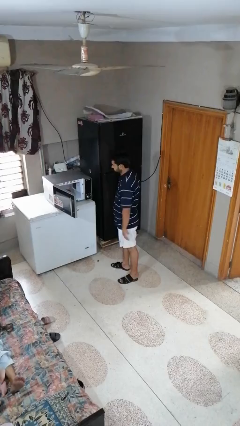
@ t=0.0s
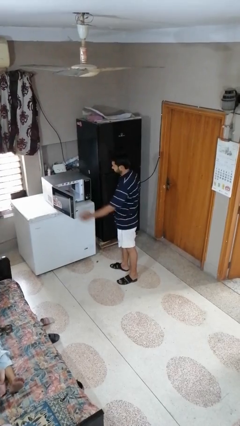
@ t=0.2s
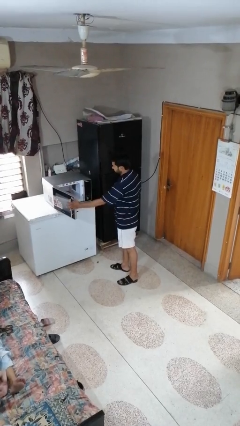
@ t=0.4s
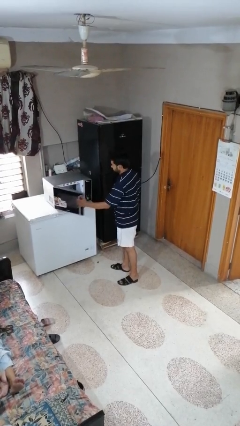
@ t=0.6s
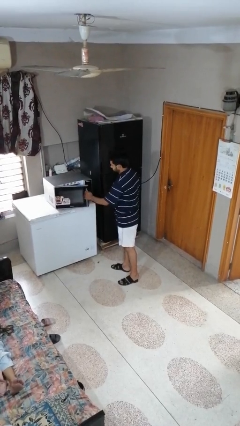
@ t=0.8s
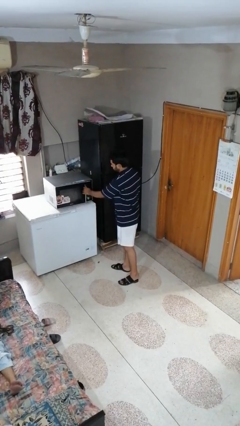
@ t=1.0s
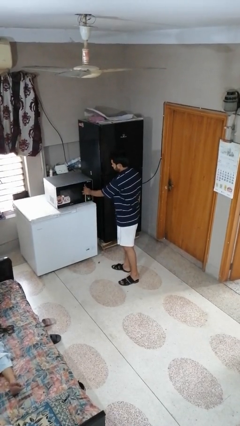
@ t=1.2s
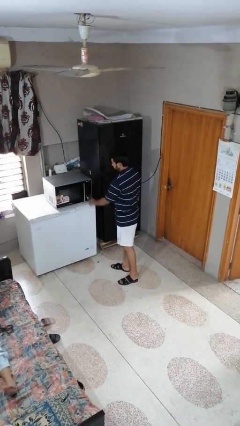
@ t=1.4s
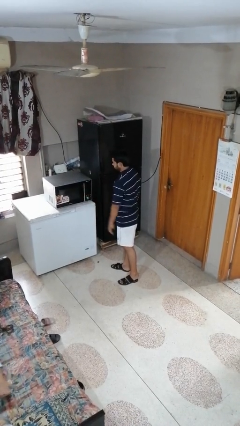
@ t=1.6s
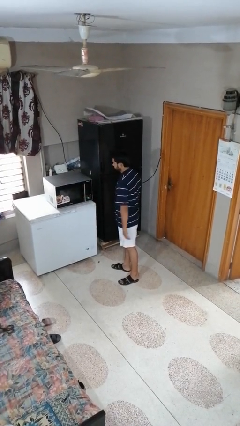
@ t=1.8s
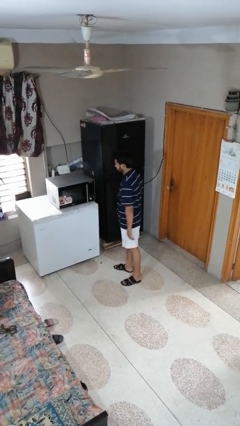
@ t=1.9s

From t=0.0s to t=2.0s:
person closes microwave

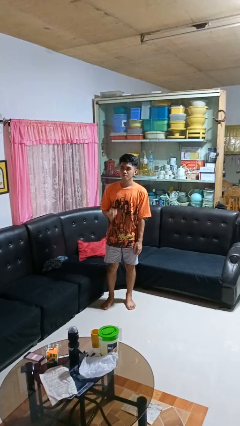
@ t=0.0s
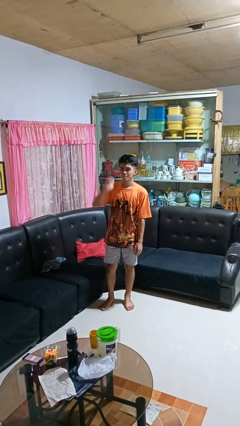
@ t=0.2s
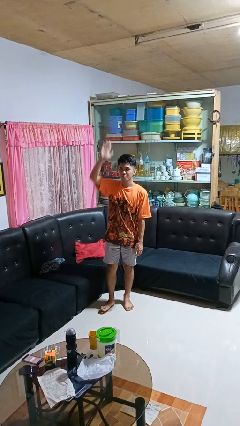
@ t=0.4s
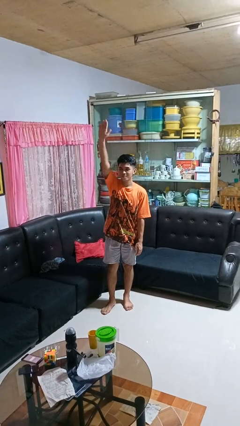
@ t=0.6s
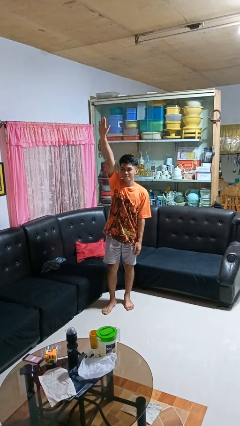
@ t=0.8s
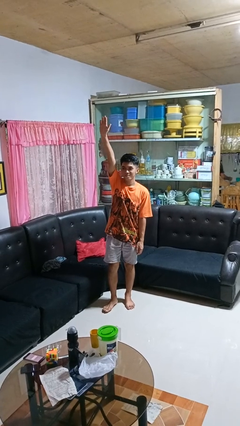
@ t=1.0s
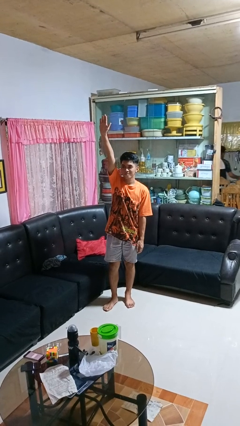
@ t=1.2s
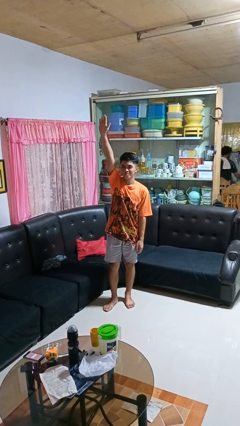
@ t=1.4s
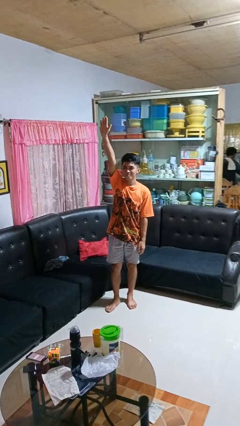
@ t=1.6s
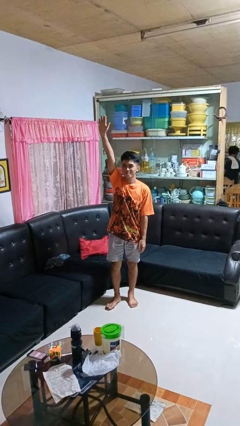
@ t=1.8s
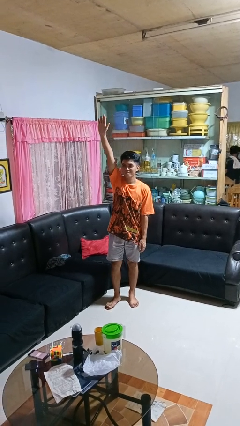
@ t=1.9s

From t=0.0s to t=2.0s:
person gestures raise hand

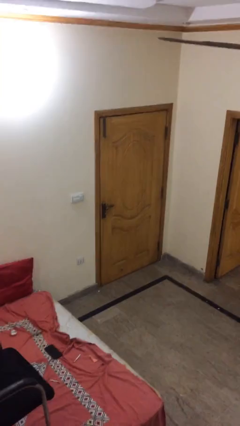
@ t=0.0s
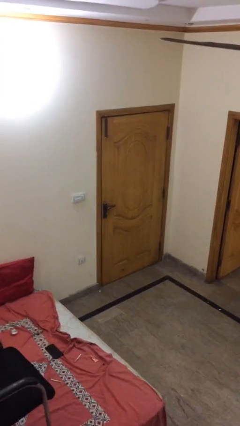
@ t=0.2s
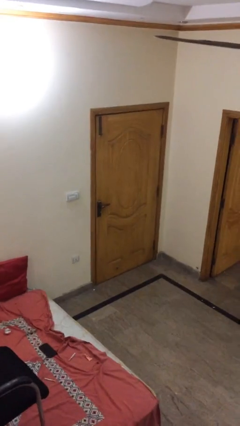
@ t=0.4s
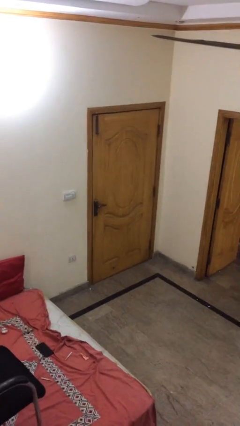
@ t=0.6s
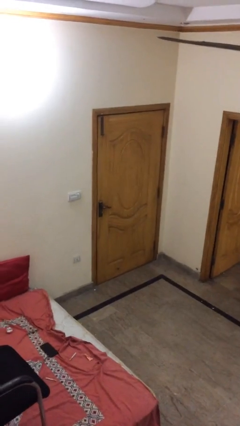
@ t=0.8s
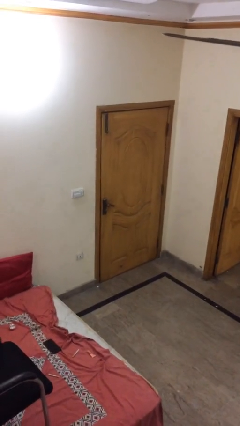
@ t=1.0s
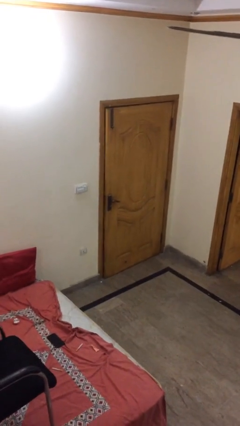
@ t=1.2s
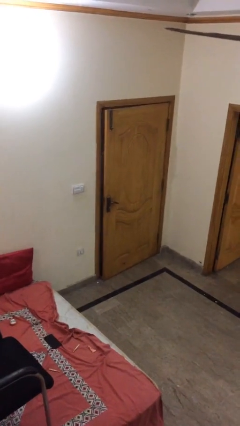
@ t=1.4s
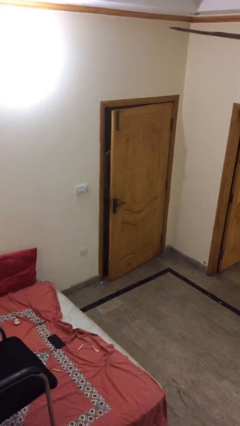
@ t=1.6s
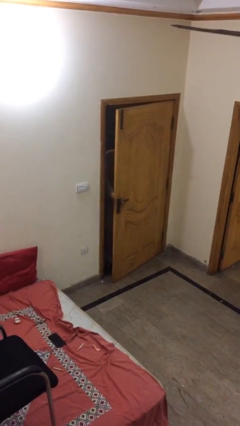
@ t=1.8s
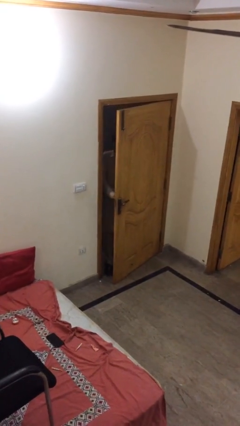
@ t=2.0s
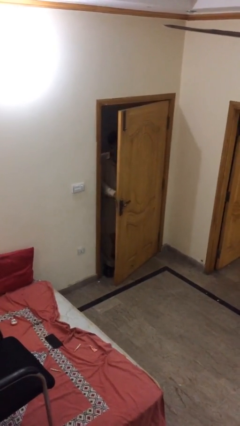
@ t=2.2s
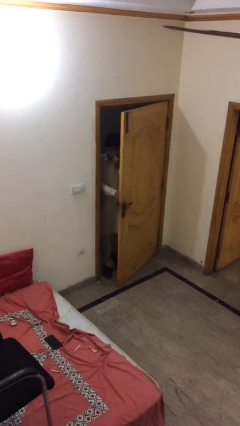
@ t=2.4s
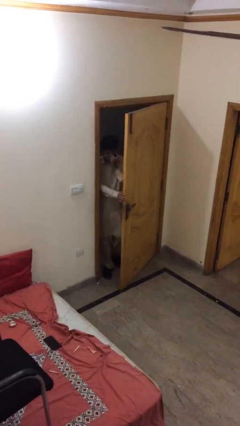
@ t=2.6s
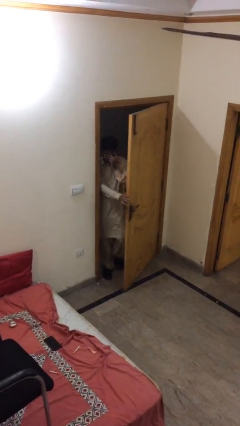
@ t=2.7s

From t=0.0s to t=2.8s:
person opens facility door

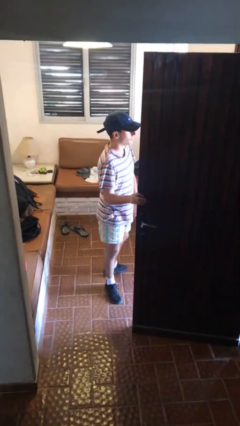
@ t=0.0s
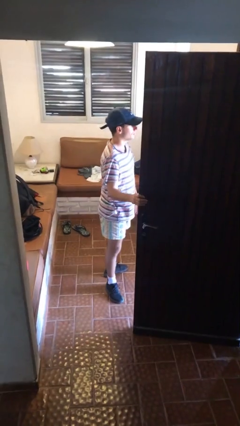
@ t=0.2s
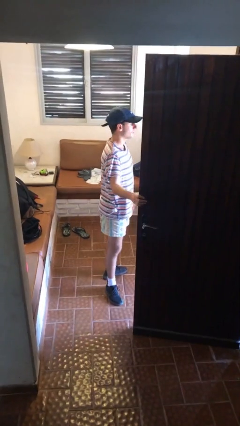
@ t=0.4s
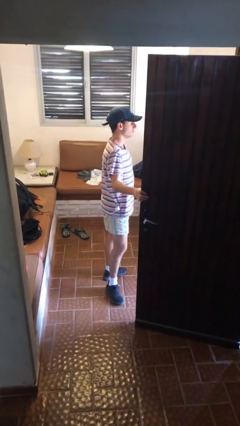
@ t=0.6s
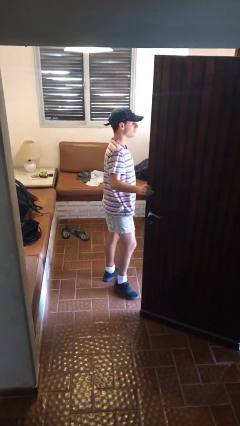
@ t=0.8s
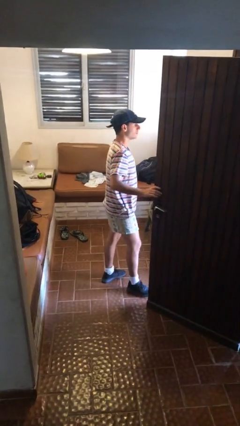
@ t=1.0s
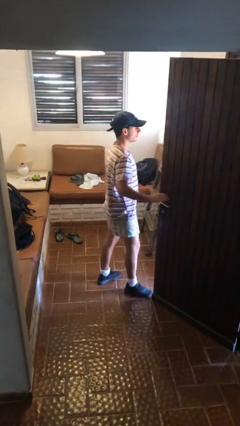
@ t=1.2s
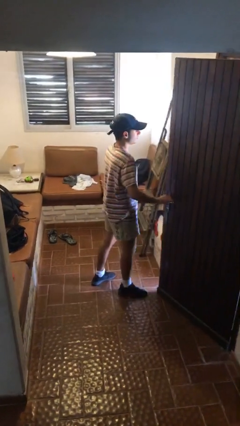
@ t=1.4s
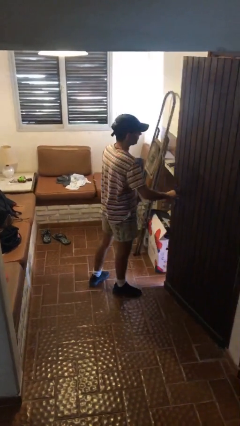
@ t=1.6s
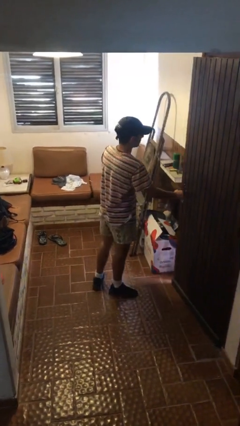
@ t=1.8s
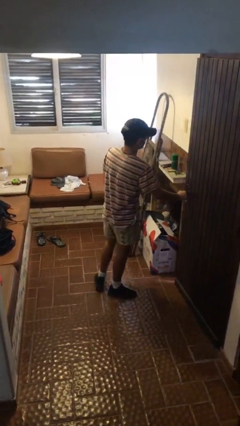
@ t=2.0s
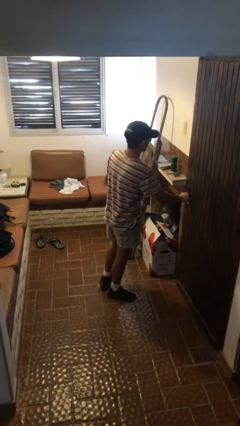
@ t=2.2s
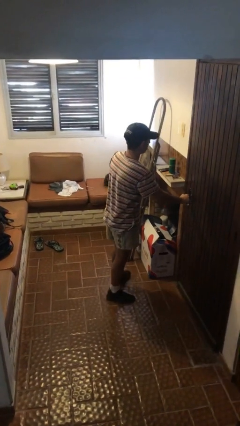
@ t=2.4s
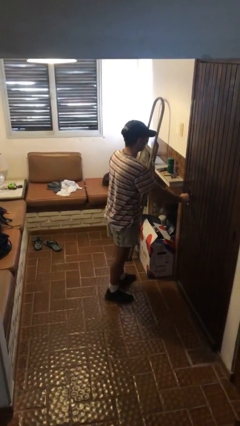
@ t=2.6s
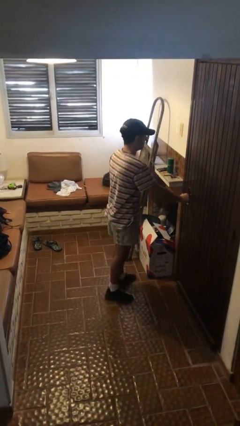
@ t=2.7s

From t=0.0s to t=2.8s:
person closes facility door

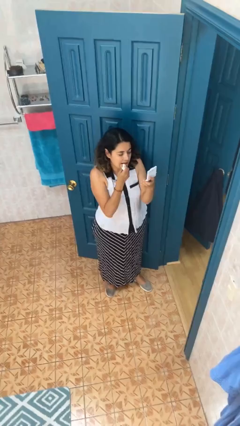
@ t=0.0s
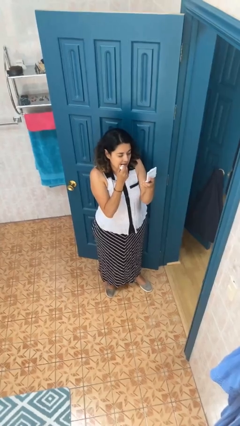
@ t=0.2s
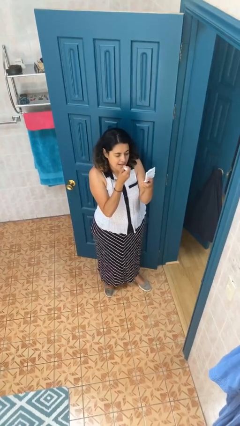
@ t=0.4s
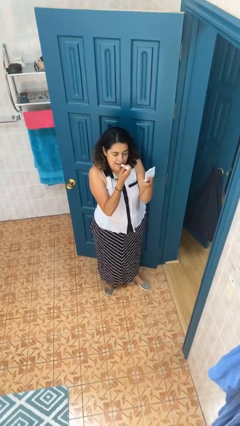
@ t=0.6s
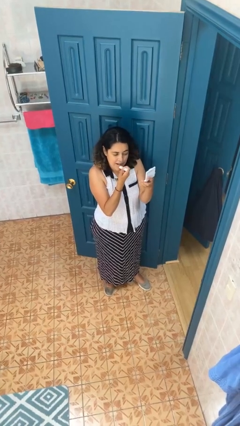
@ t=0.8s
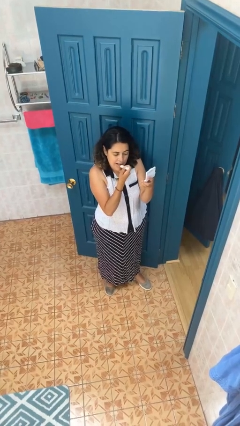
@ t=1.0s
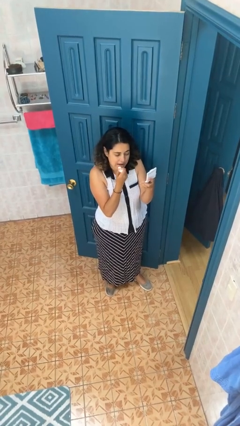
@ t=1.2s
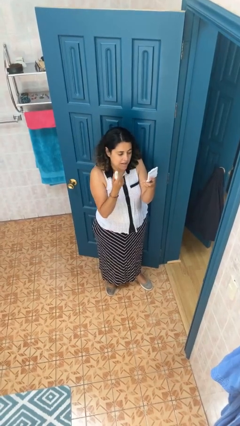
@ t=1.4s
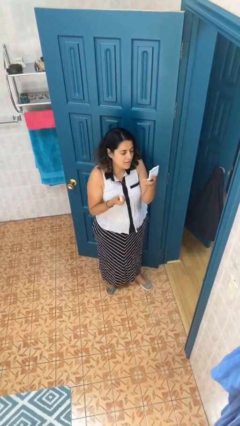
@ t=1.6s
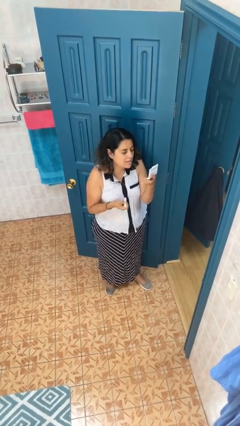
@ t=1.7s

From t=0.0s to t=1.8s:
person applies lip makeup

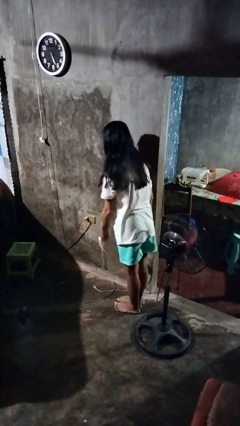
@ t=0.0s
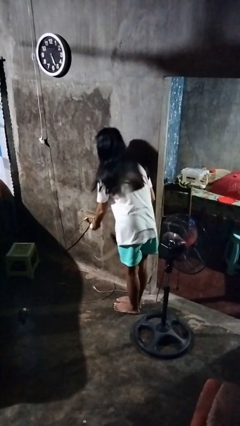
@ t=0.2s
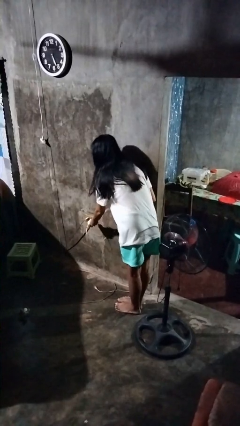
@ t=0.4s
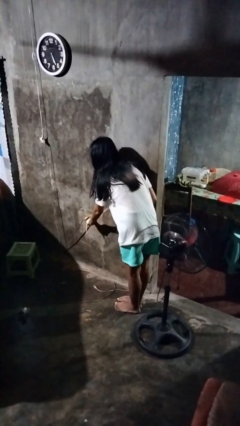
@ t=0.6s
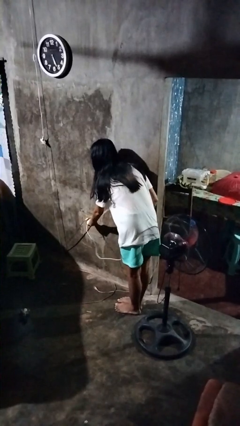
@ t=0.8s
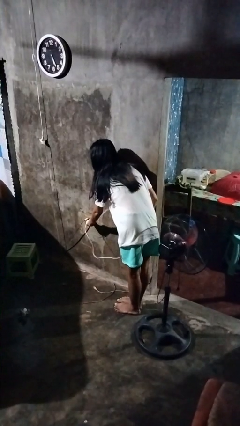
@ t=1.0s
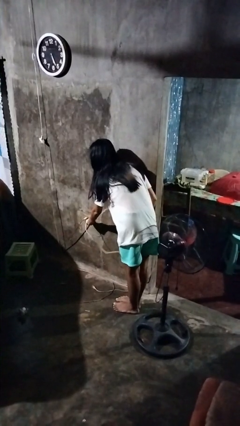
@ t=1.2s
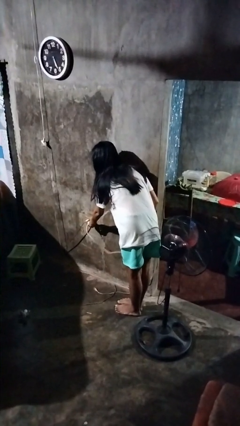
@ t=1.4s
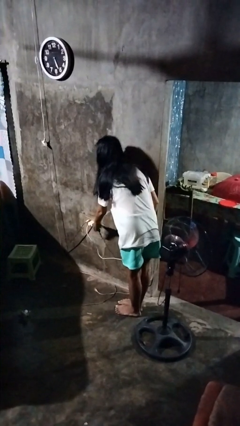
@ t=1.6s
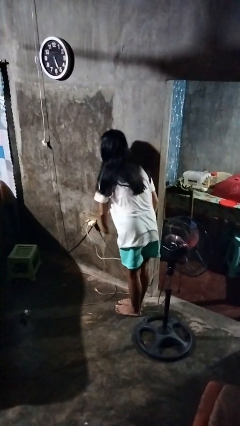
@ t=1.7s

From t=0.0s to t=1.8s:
person plugs into electrical socket

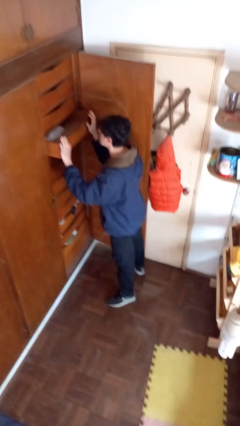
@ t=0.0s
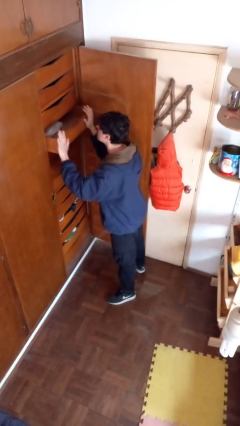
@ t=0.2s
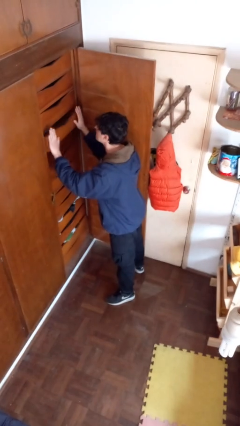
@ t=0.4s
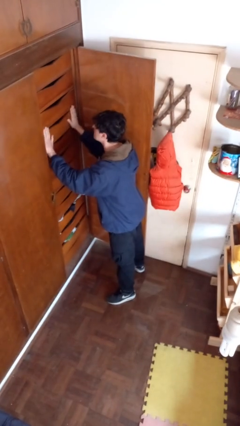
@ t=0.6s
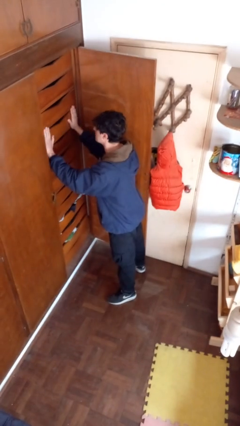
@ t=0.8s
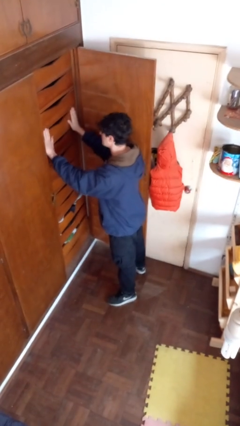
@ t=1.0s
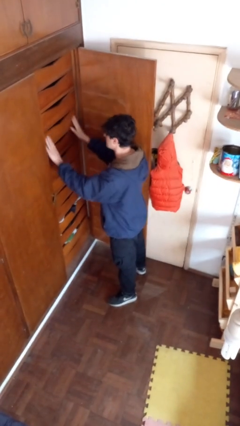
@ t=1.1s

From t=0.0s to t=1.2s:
person closes dresser drawer

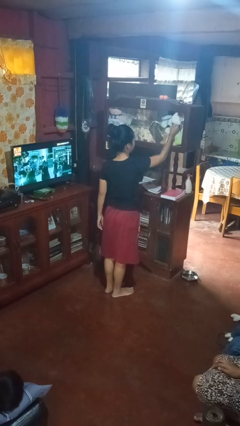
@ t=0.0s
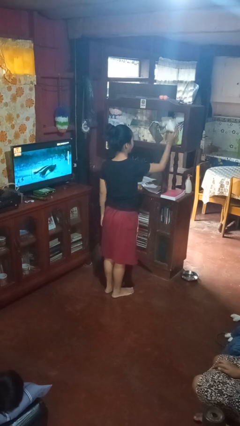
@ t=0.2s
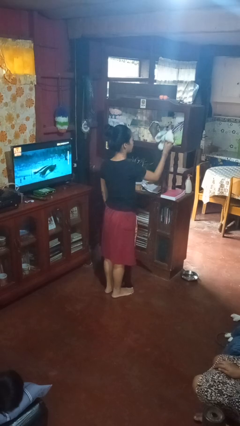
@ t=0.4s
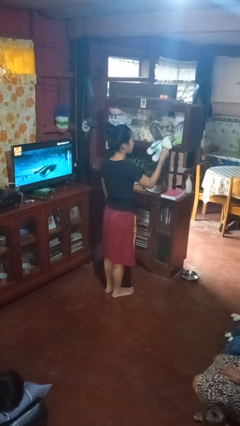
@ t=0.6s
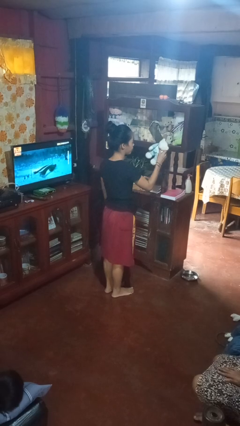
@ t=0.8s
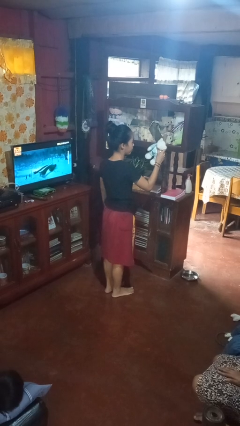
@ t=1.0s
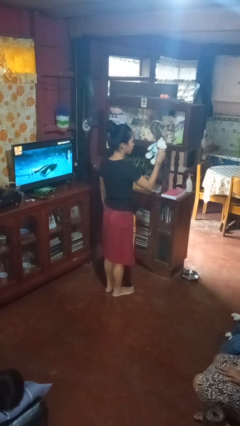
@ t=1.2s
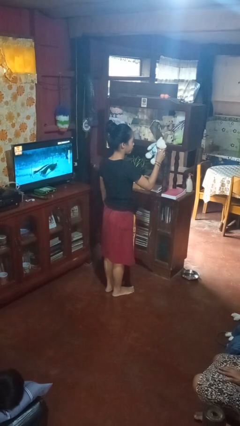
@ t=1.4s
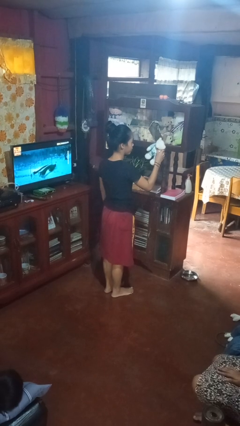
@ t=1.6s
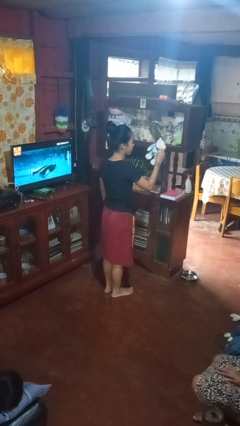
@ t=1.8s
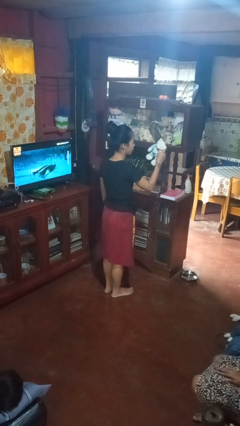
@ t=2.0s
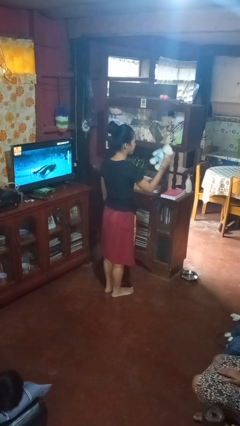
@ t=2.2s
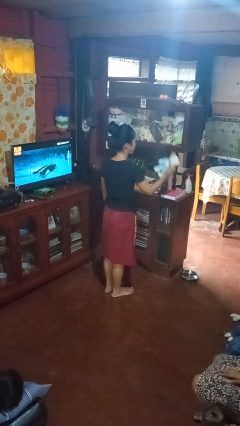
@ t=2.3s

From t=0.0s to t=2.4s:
person picks up object from shelf
